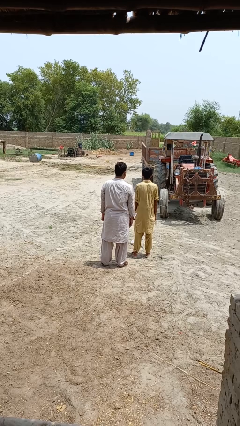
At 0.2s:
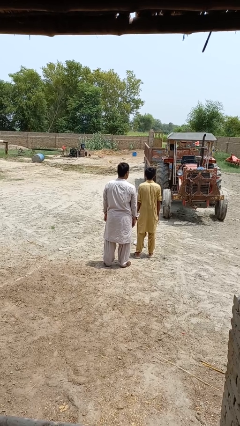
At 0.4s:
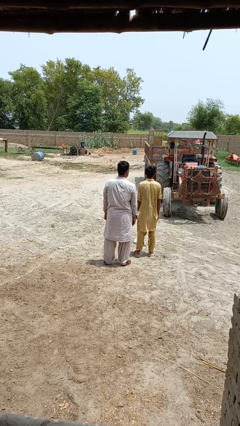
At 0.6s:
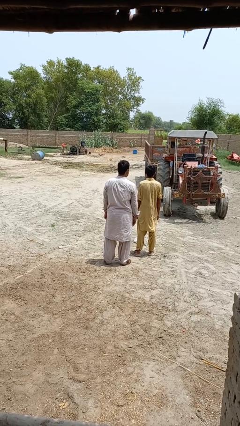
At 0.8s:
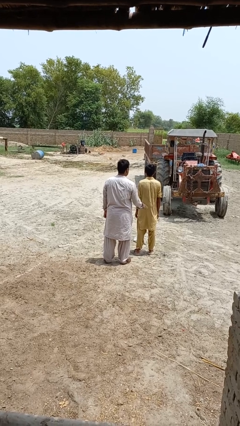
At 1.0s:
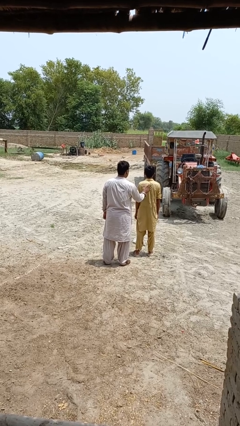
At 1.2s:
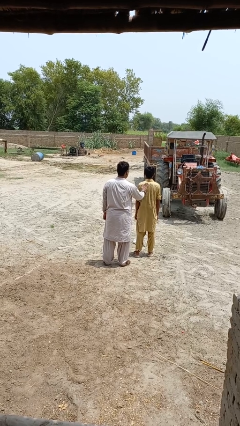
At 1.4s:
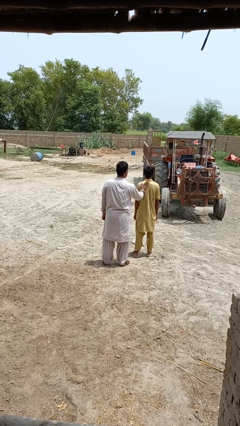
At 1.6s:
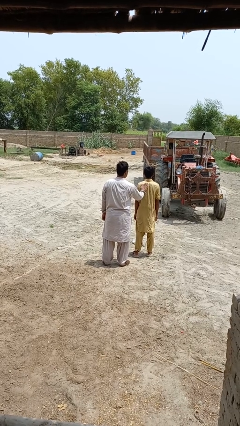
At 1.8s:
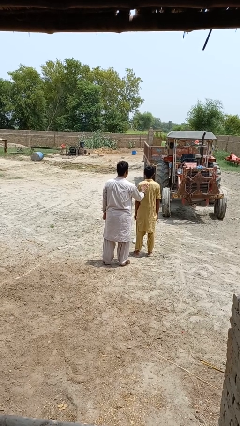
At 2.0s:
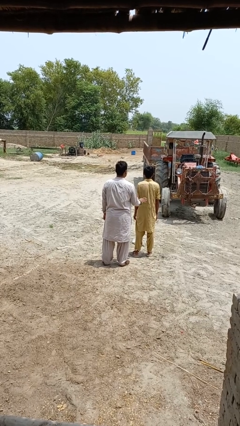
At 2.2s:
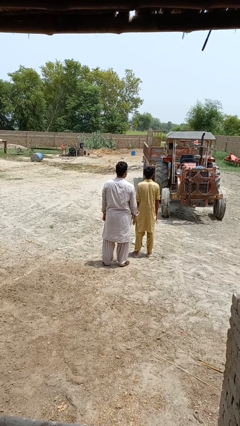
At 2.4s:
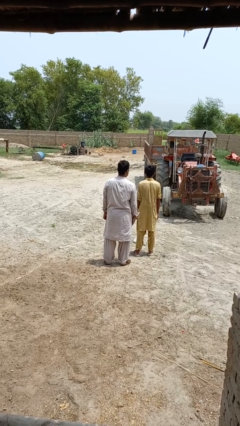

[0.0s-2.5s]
person touches back of person

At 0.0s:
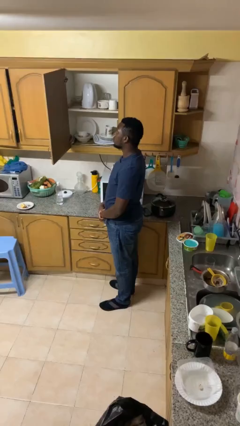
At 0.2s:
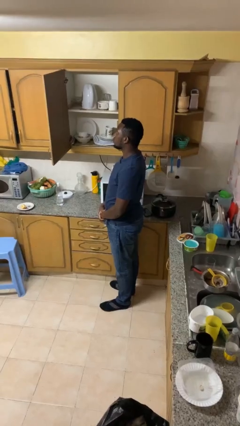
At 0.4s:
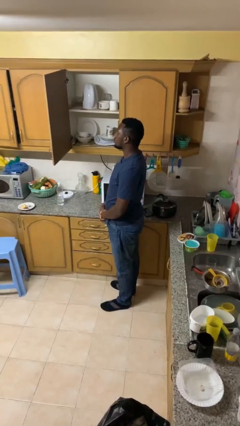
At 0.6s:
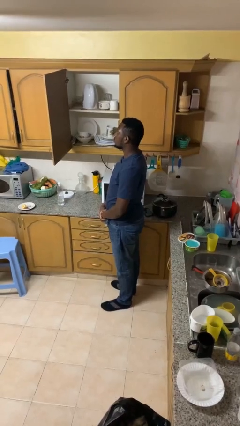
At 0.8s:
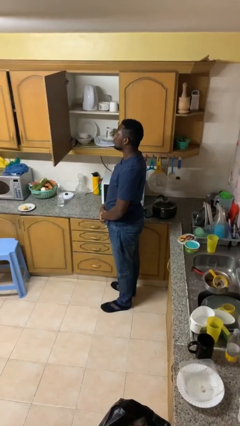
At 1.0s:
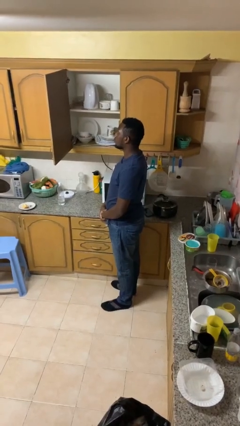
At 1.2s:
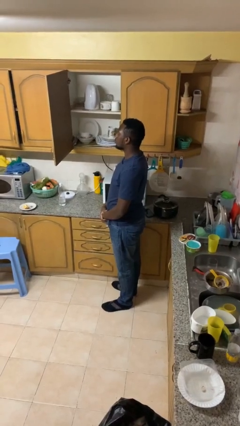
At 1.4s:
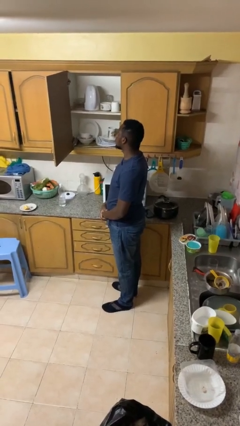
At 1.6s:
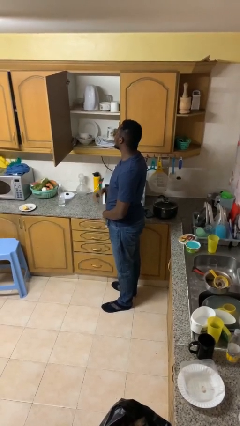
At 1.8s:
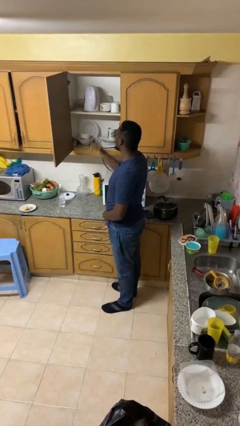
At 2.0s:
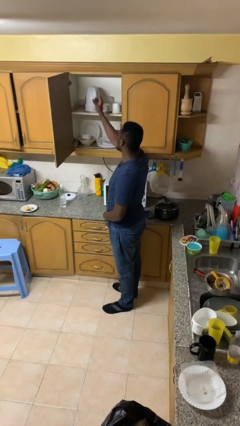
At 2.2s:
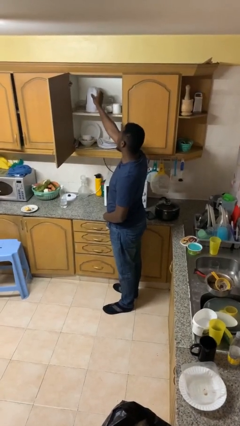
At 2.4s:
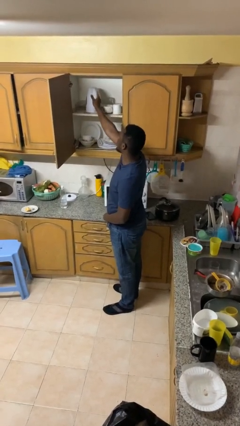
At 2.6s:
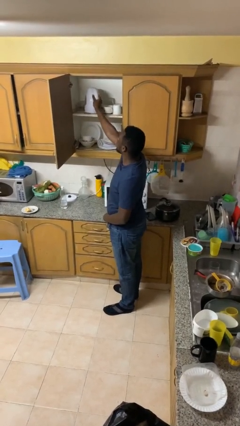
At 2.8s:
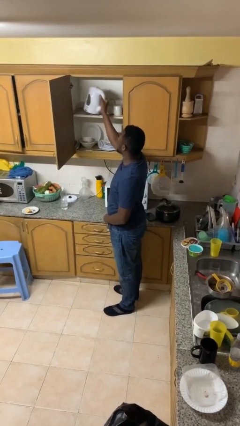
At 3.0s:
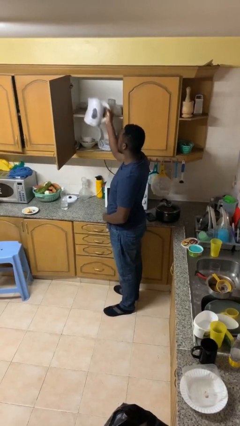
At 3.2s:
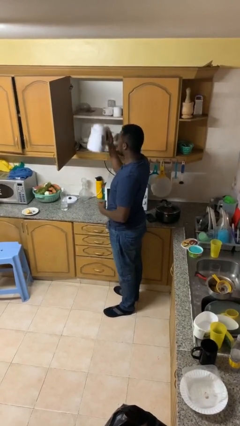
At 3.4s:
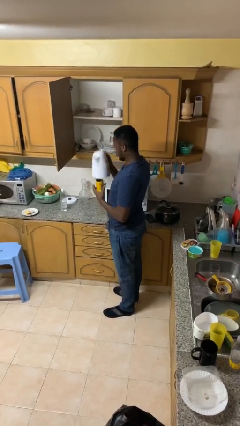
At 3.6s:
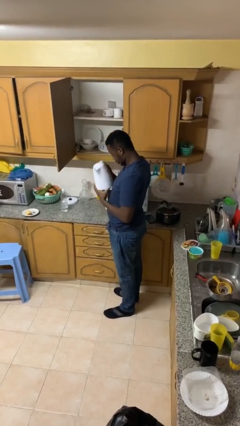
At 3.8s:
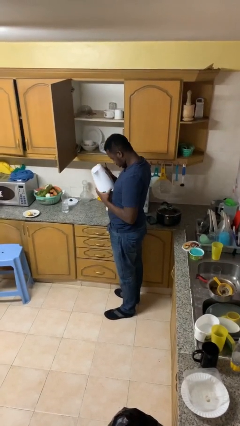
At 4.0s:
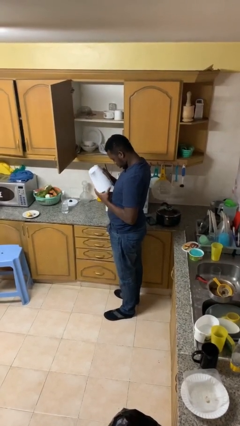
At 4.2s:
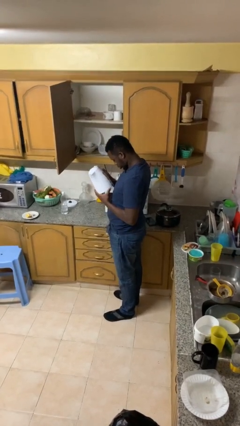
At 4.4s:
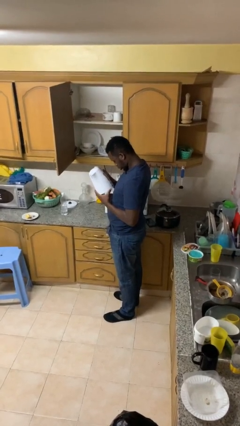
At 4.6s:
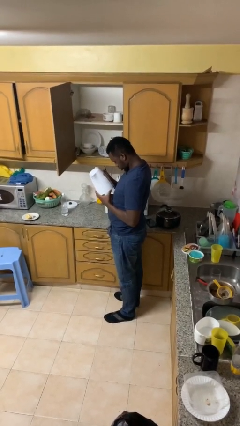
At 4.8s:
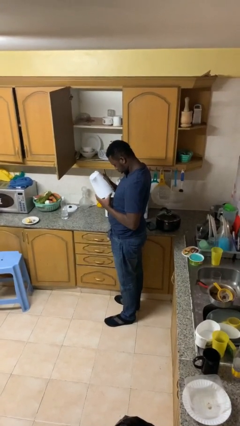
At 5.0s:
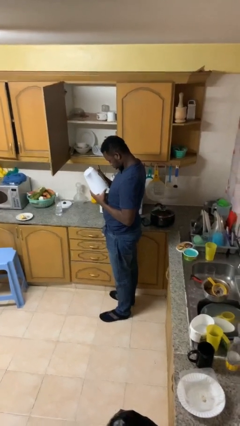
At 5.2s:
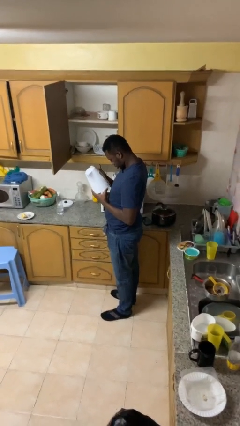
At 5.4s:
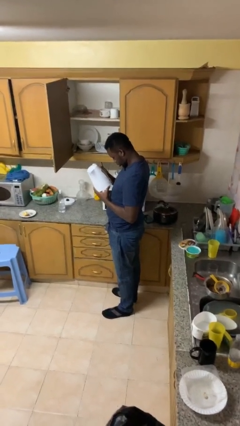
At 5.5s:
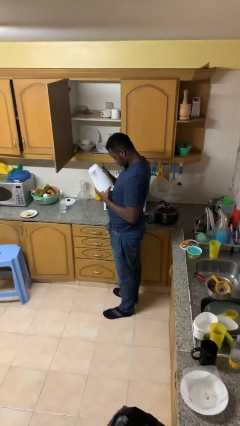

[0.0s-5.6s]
person picks up object from shelf

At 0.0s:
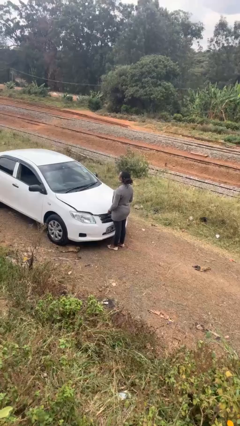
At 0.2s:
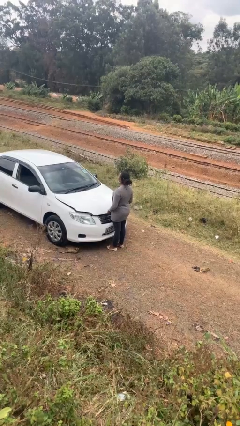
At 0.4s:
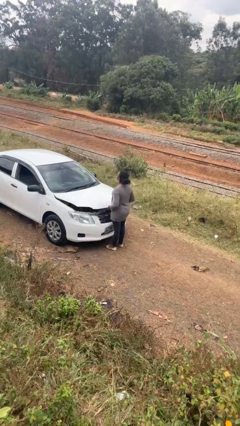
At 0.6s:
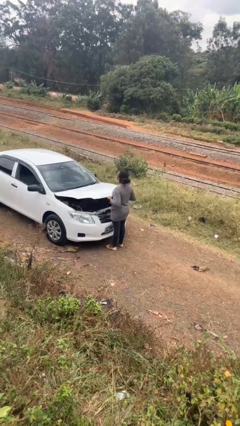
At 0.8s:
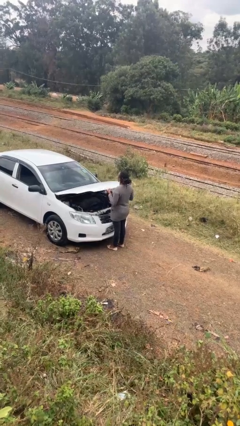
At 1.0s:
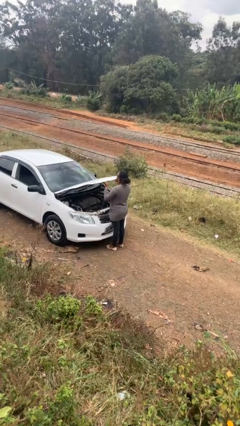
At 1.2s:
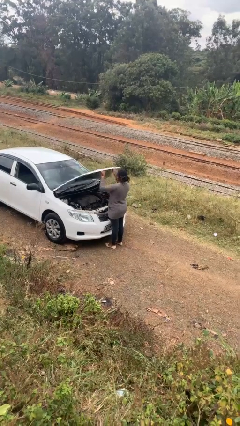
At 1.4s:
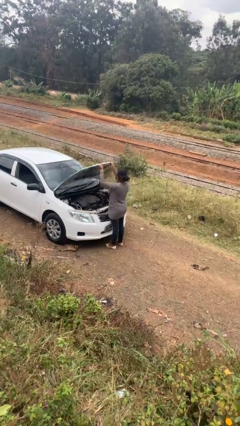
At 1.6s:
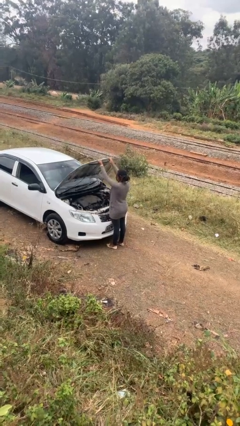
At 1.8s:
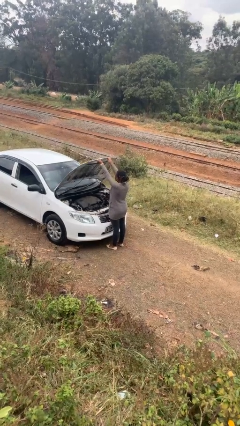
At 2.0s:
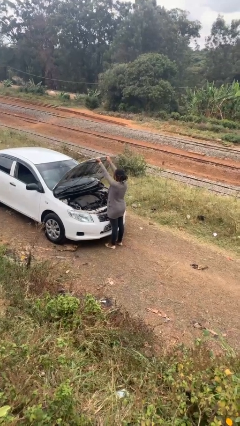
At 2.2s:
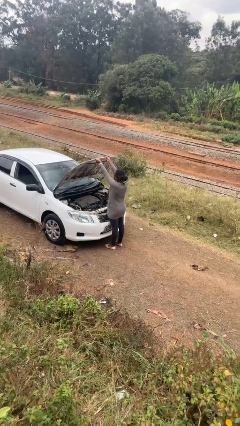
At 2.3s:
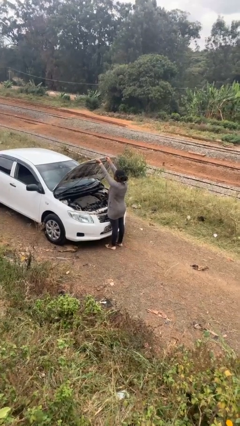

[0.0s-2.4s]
person opens car hood

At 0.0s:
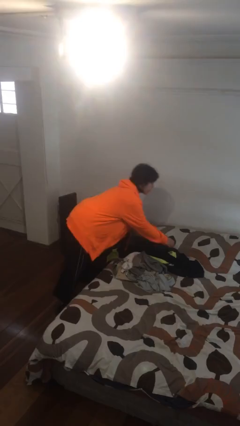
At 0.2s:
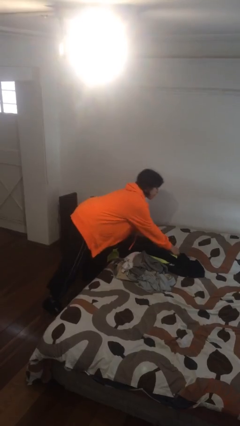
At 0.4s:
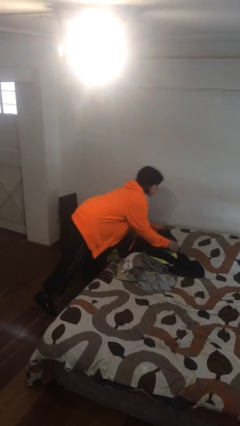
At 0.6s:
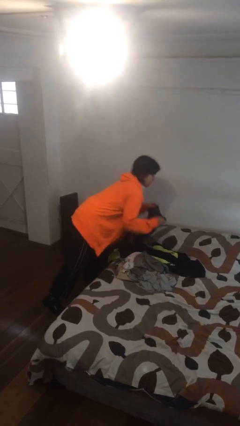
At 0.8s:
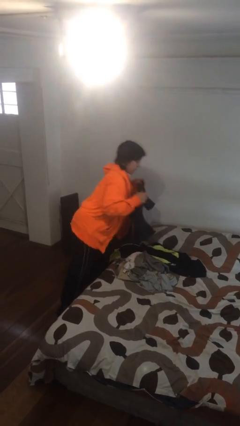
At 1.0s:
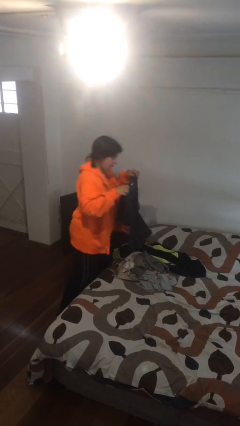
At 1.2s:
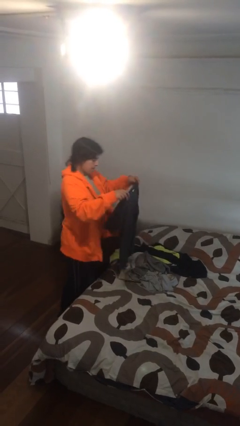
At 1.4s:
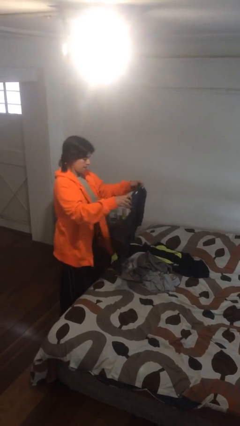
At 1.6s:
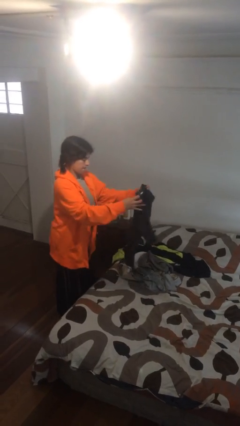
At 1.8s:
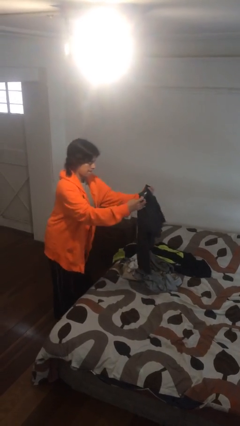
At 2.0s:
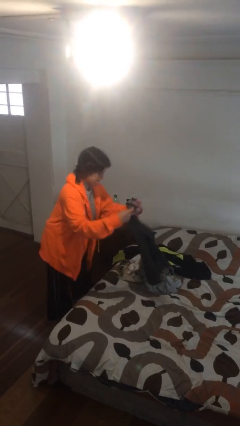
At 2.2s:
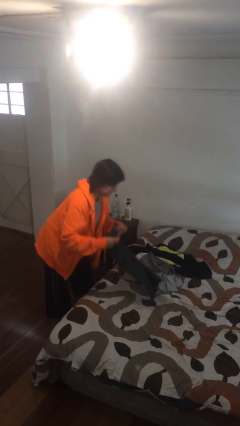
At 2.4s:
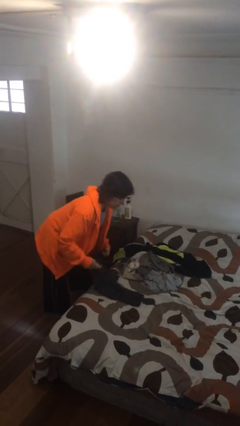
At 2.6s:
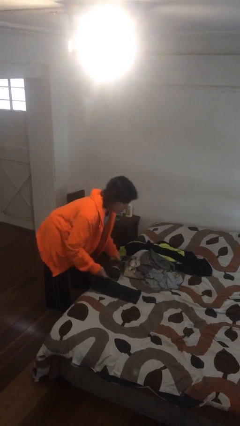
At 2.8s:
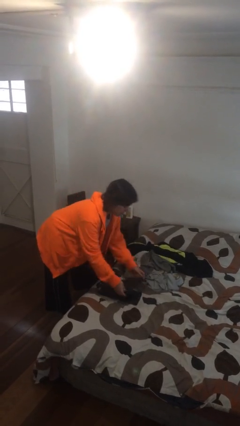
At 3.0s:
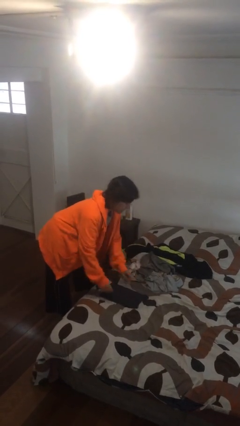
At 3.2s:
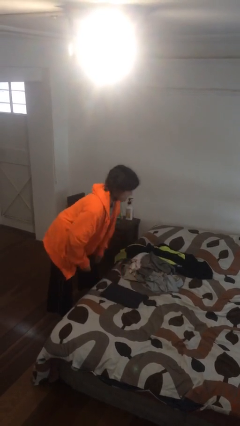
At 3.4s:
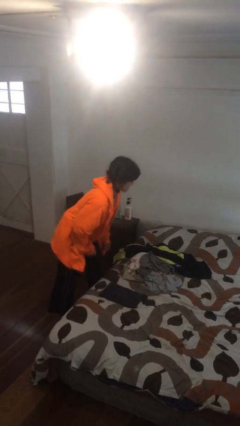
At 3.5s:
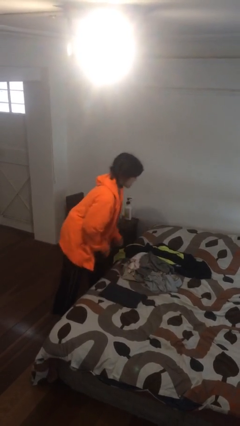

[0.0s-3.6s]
person folds shirt

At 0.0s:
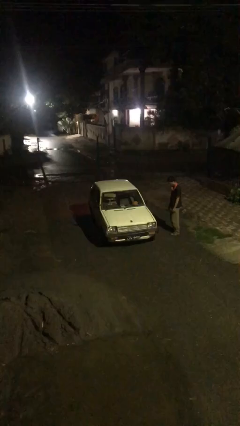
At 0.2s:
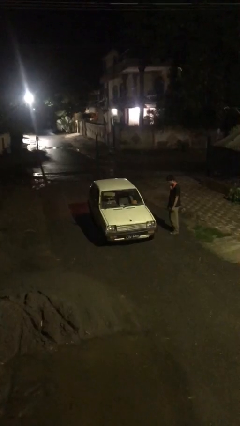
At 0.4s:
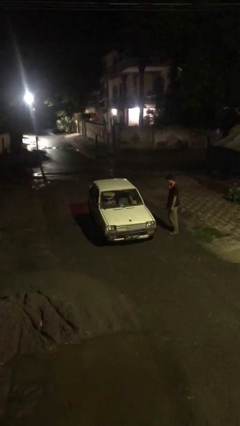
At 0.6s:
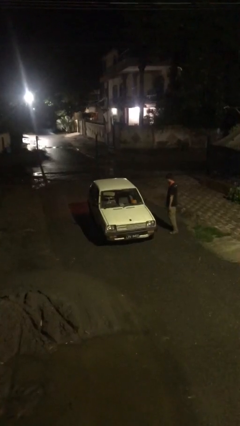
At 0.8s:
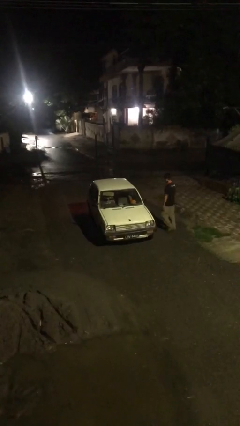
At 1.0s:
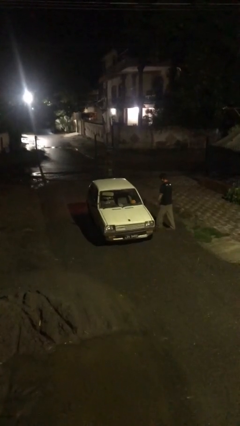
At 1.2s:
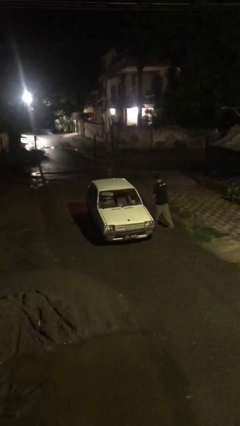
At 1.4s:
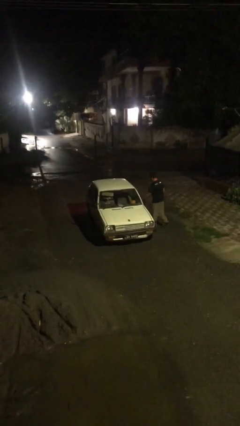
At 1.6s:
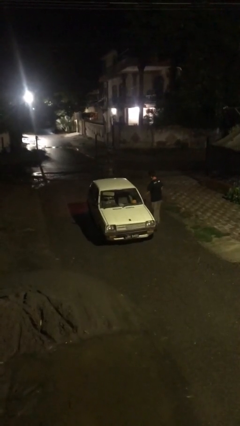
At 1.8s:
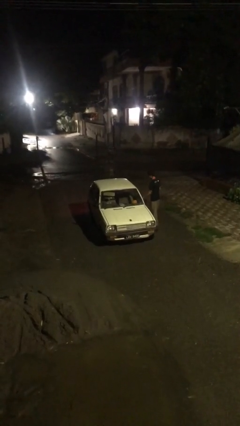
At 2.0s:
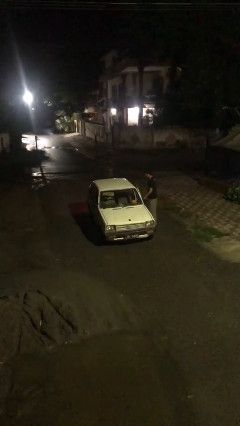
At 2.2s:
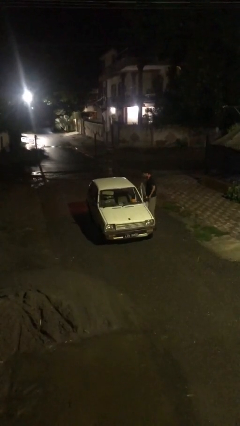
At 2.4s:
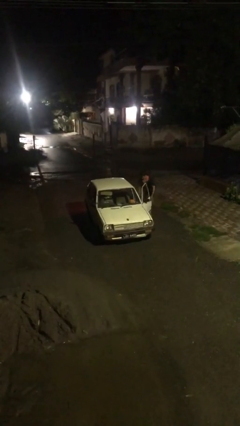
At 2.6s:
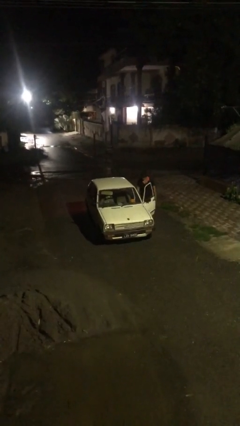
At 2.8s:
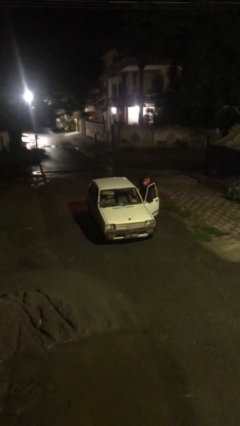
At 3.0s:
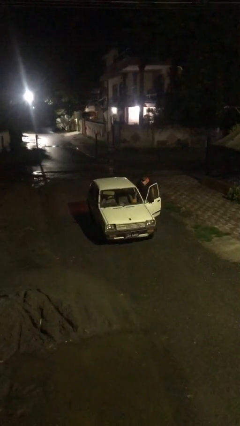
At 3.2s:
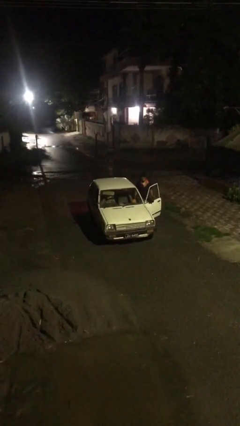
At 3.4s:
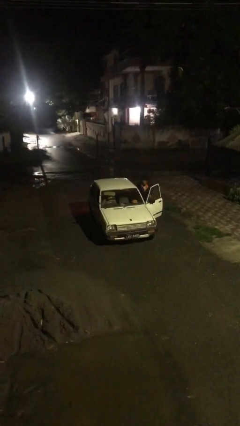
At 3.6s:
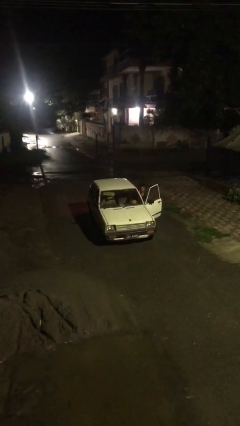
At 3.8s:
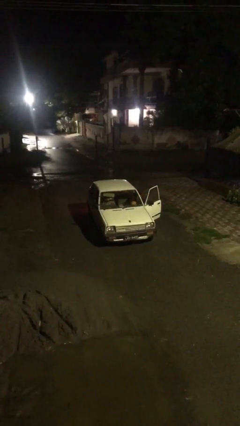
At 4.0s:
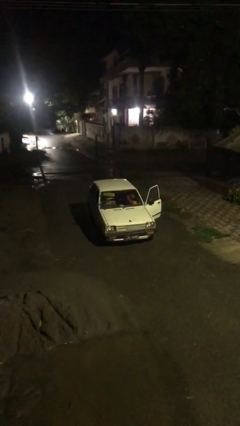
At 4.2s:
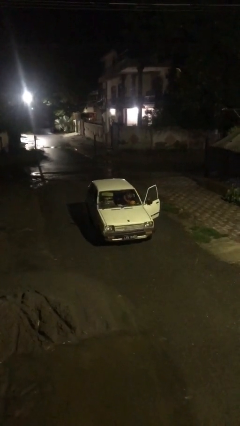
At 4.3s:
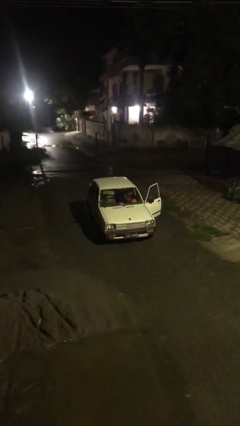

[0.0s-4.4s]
car picks up person
